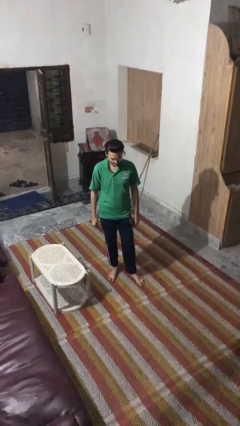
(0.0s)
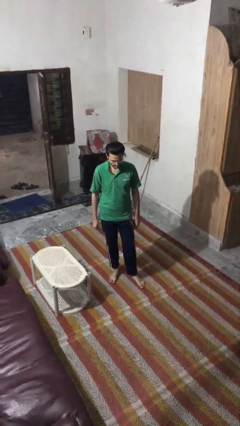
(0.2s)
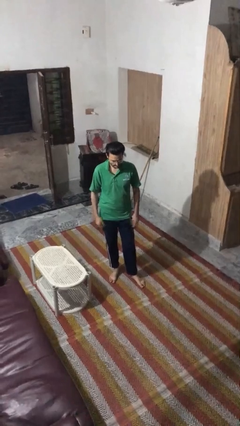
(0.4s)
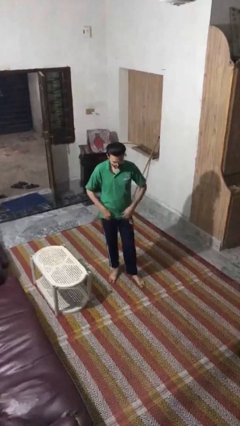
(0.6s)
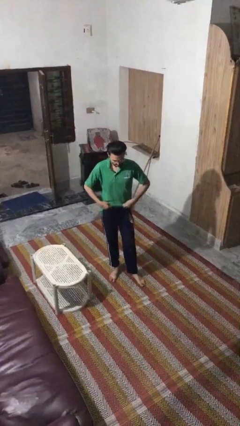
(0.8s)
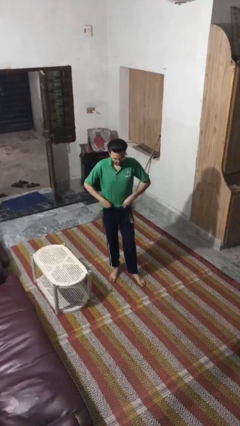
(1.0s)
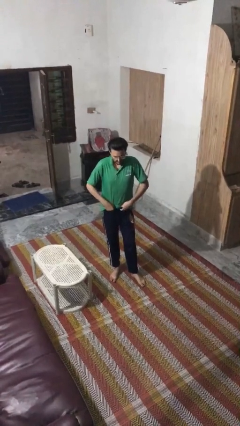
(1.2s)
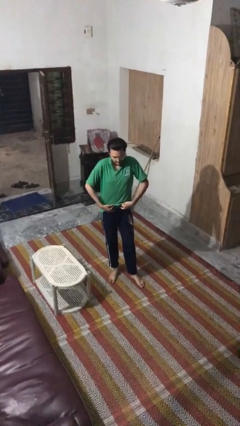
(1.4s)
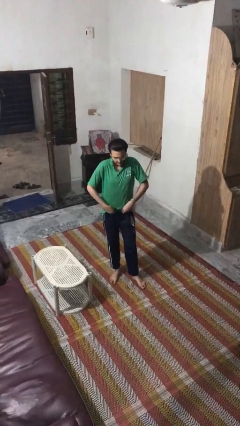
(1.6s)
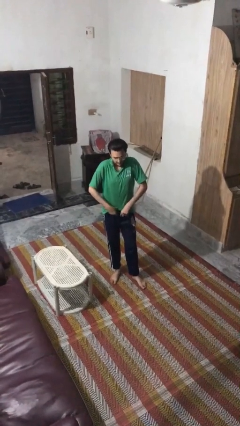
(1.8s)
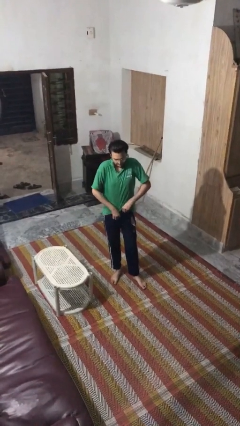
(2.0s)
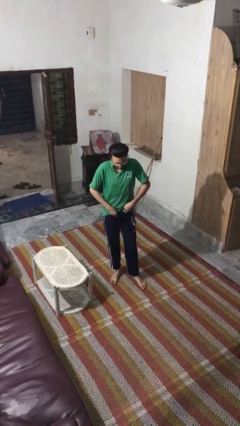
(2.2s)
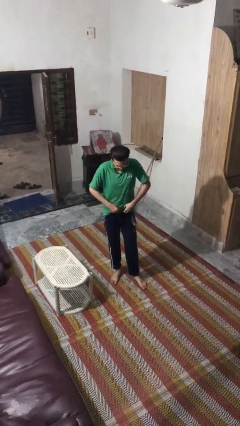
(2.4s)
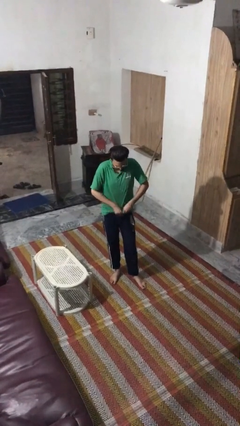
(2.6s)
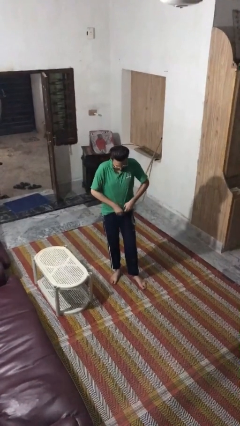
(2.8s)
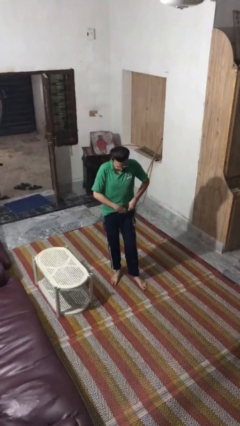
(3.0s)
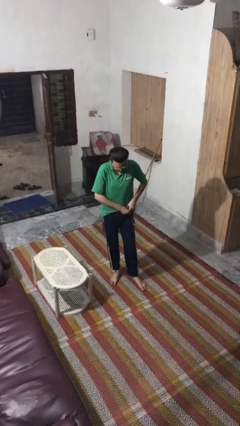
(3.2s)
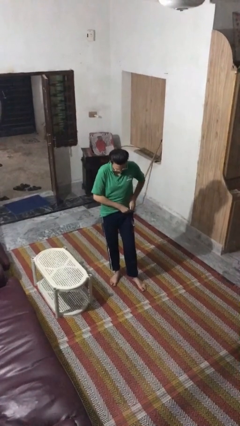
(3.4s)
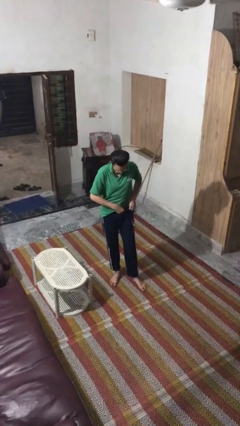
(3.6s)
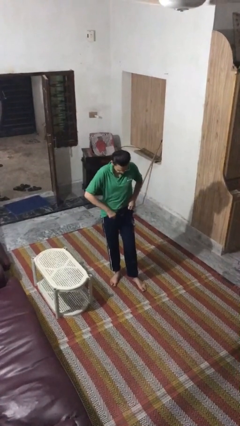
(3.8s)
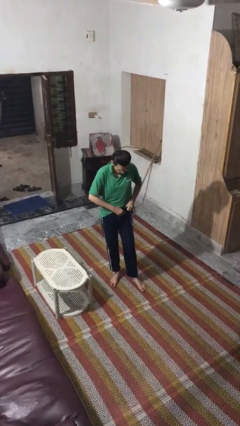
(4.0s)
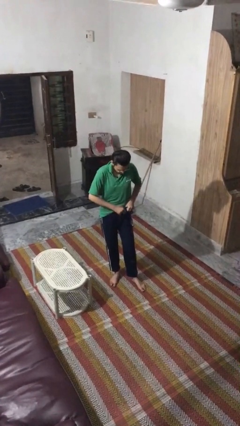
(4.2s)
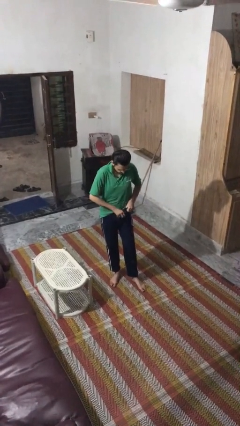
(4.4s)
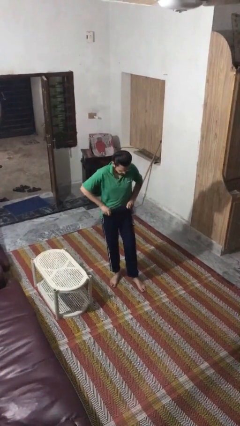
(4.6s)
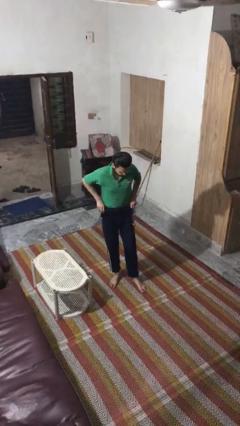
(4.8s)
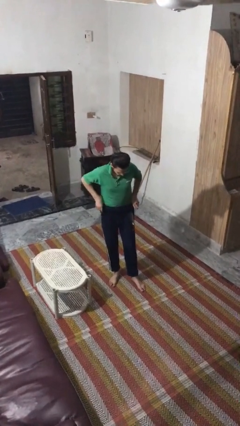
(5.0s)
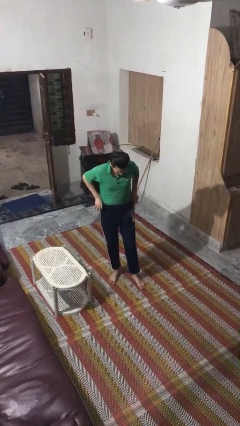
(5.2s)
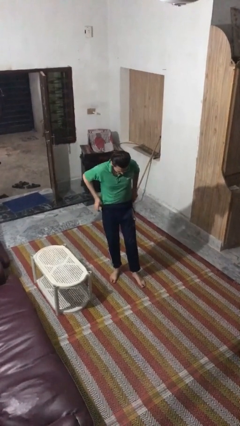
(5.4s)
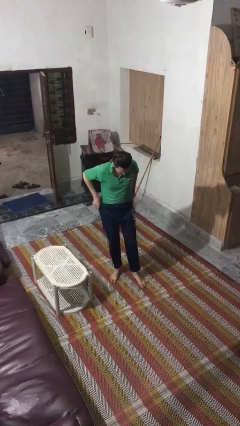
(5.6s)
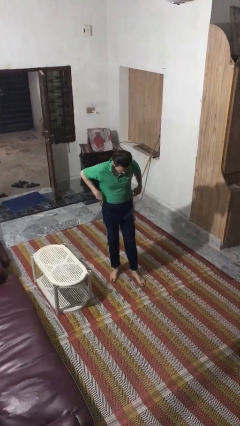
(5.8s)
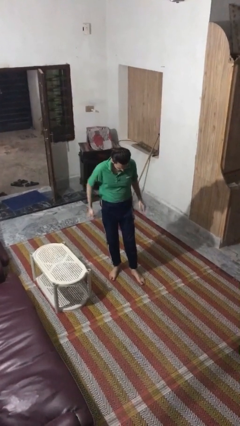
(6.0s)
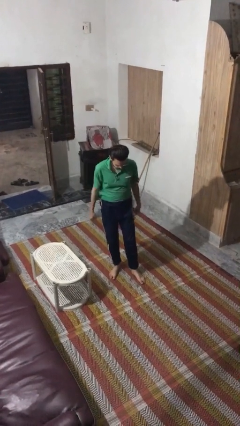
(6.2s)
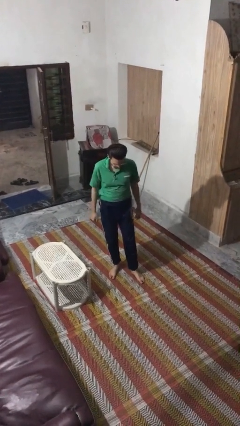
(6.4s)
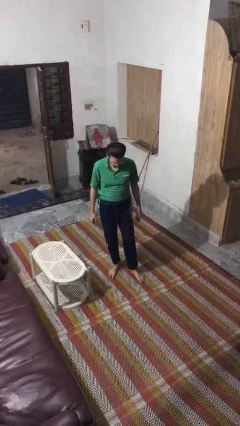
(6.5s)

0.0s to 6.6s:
person tucks in shirt

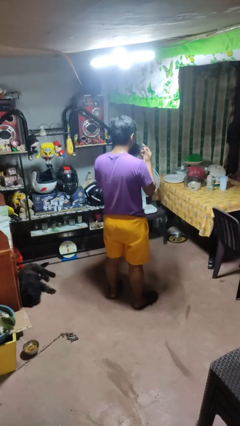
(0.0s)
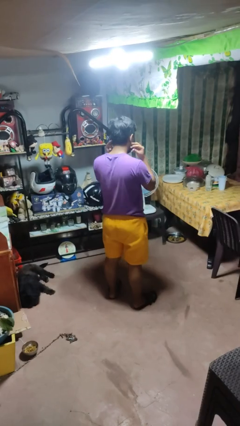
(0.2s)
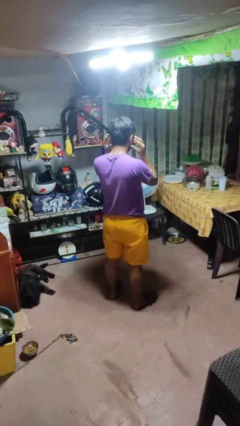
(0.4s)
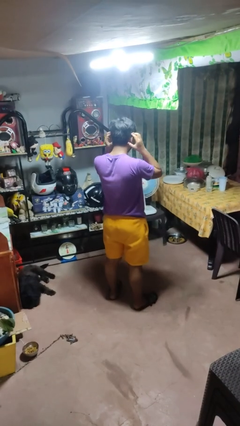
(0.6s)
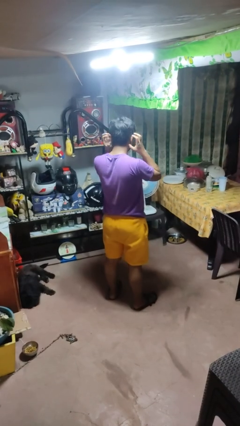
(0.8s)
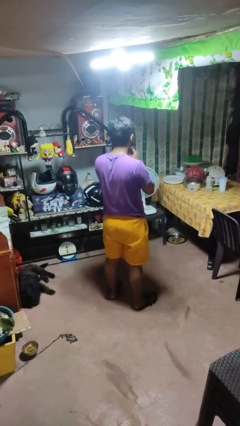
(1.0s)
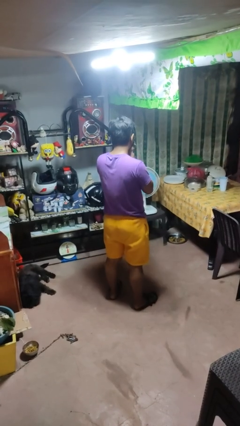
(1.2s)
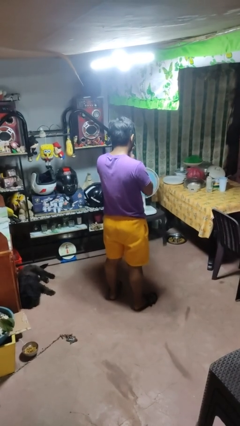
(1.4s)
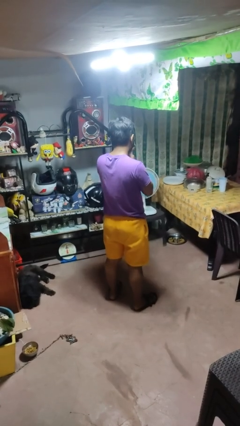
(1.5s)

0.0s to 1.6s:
person puts on facemask

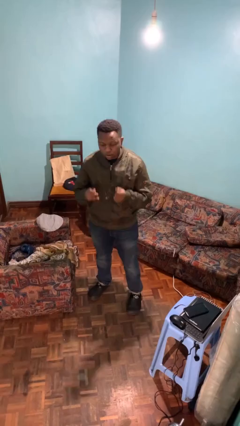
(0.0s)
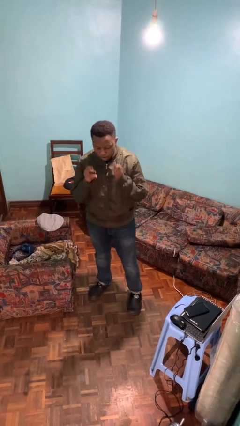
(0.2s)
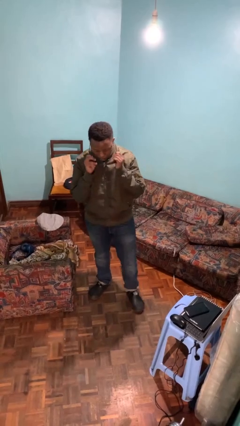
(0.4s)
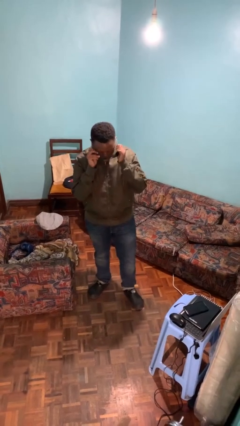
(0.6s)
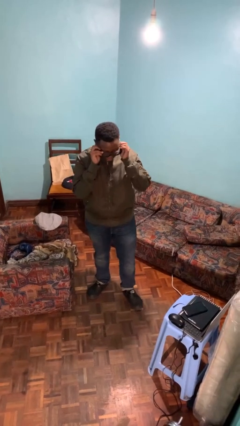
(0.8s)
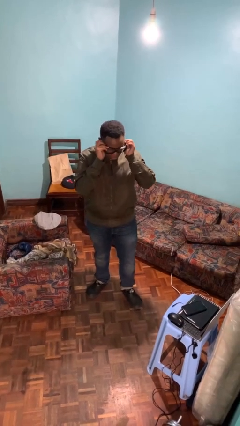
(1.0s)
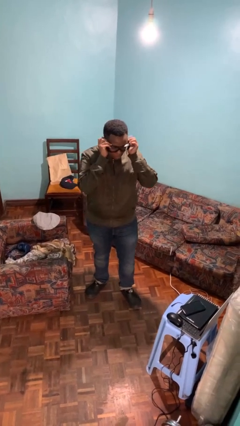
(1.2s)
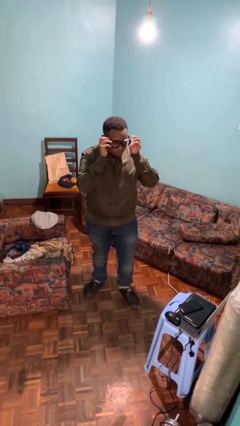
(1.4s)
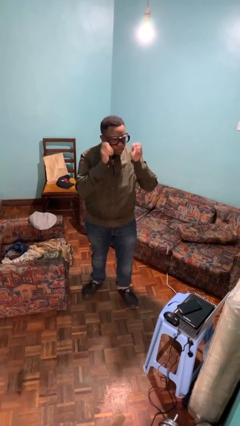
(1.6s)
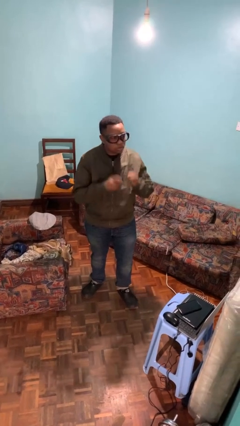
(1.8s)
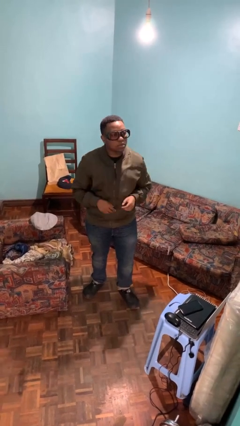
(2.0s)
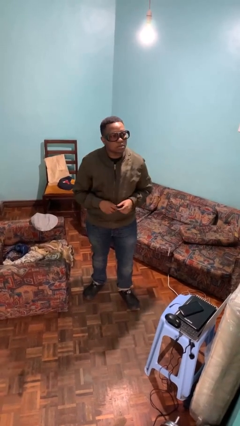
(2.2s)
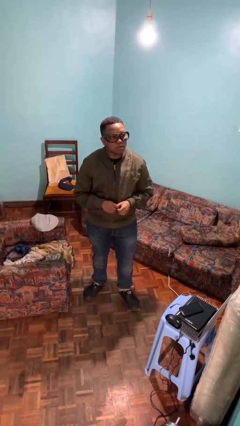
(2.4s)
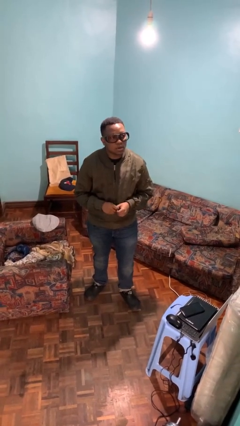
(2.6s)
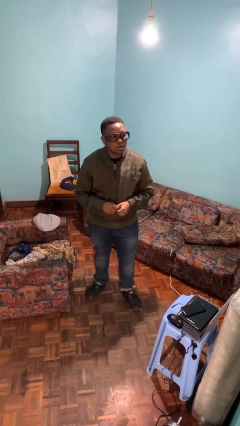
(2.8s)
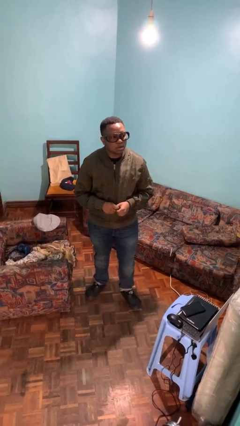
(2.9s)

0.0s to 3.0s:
person puts on glasses

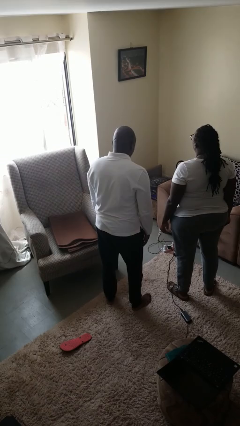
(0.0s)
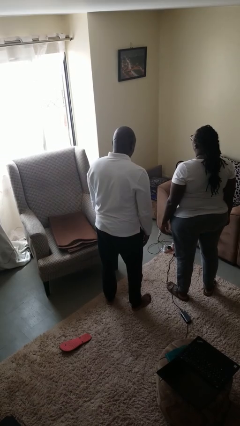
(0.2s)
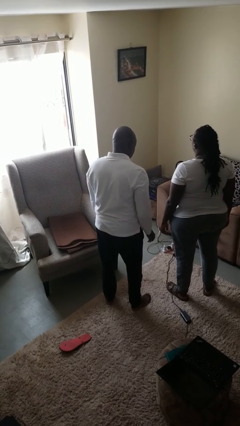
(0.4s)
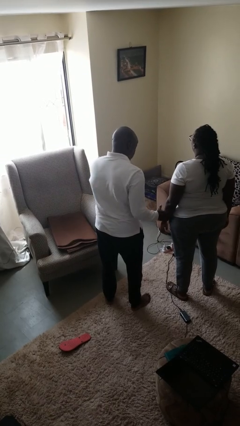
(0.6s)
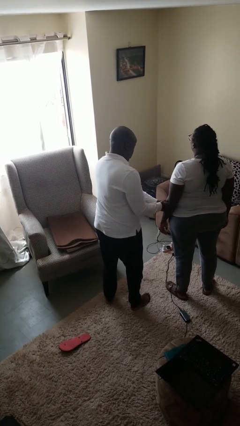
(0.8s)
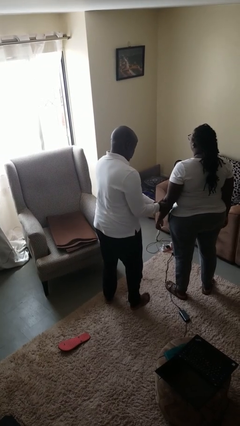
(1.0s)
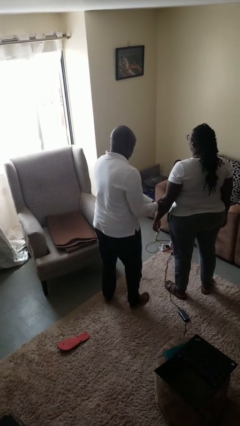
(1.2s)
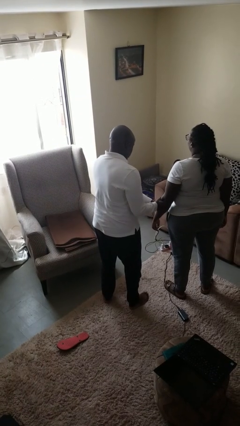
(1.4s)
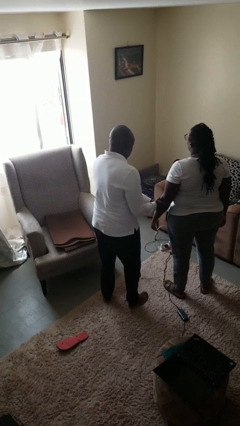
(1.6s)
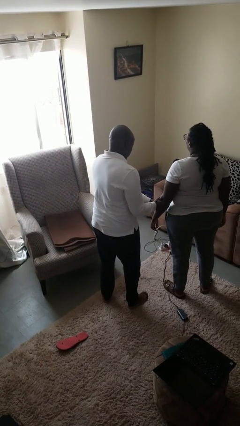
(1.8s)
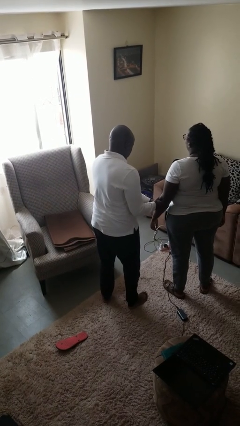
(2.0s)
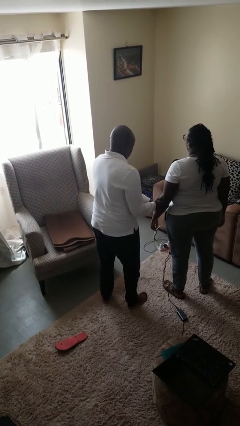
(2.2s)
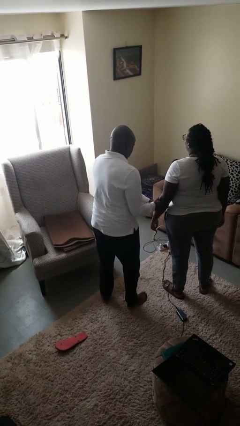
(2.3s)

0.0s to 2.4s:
person grabs person by forearm

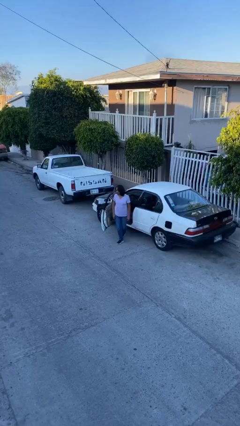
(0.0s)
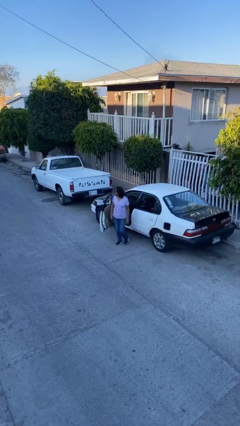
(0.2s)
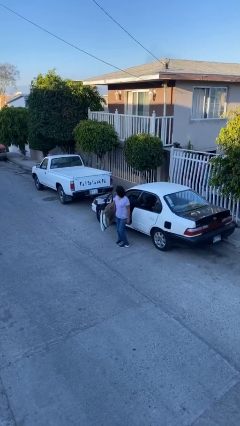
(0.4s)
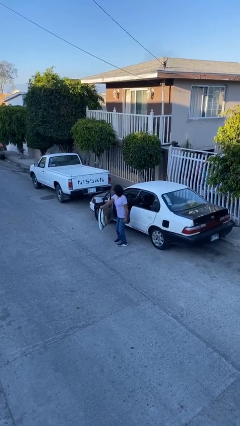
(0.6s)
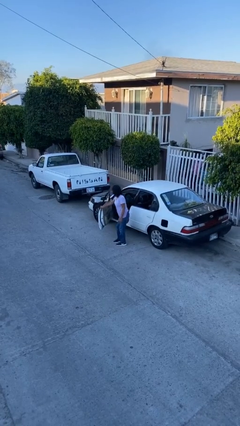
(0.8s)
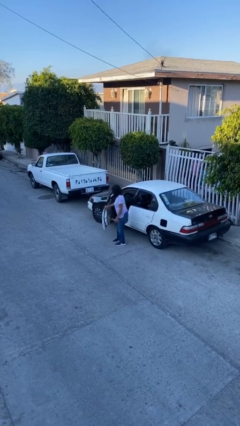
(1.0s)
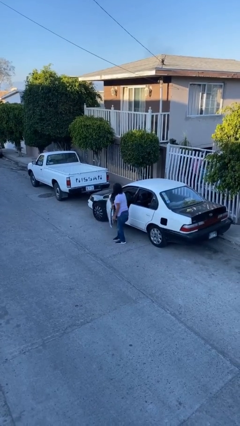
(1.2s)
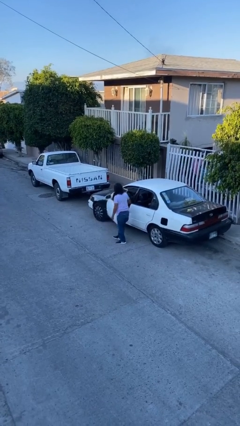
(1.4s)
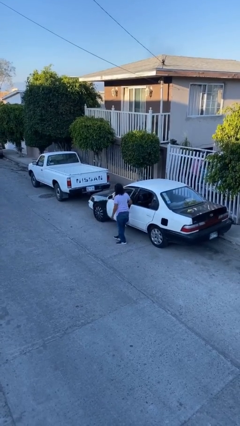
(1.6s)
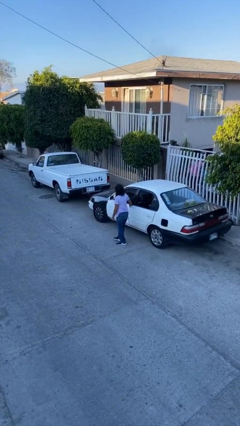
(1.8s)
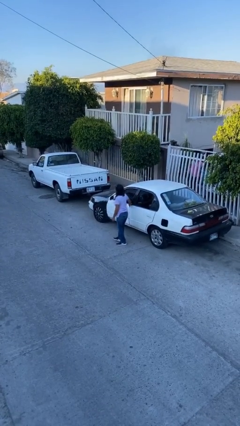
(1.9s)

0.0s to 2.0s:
person closes car door

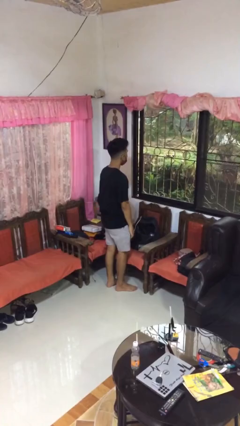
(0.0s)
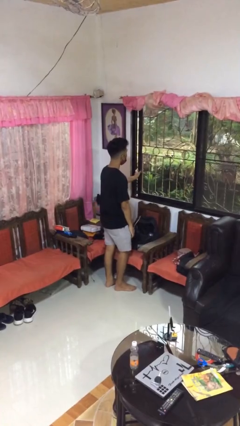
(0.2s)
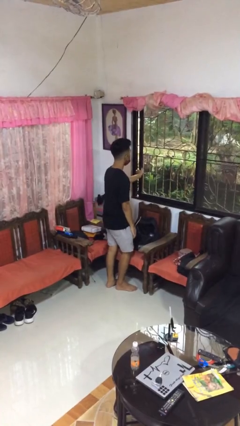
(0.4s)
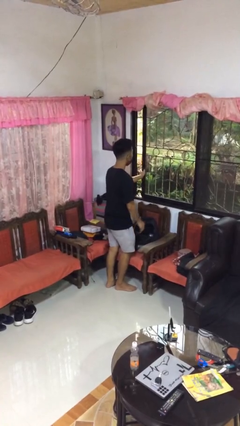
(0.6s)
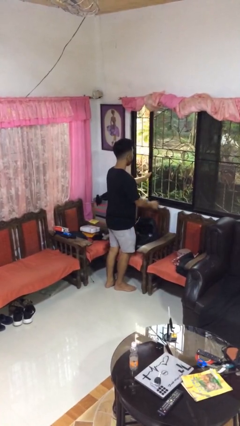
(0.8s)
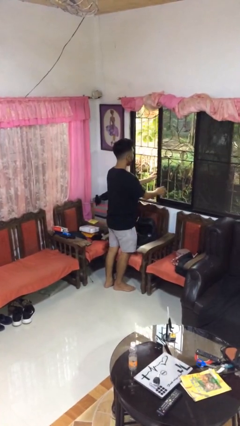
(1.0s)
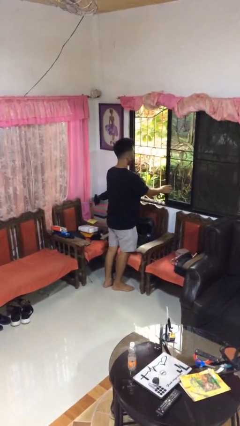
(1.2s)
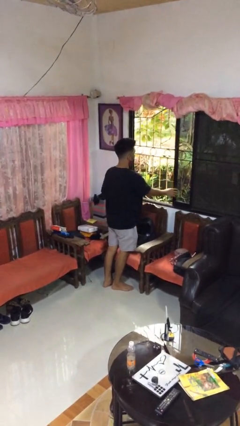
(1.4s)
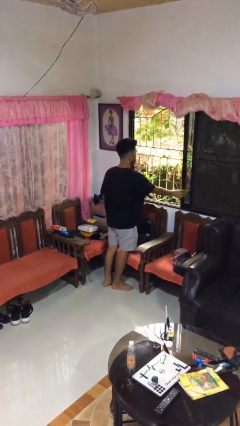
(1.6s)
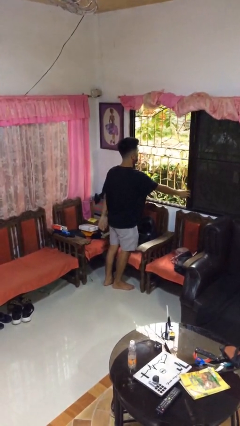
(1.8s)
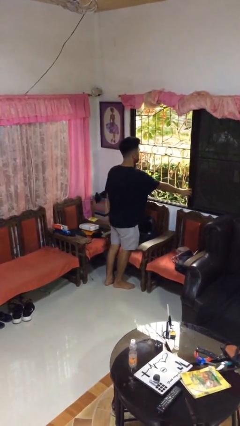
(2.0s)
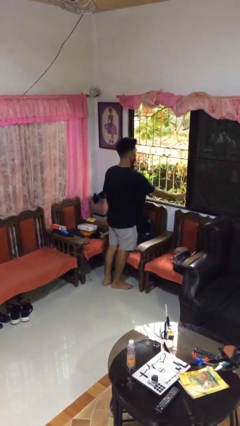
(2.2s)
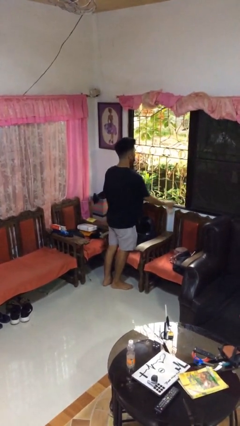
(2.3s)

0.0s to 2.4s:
person opens home window
